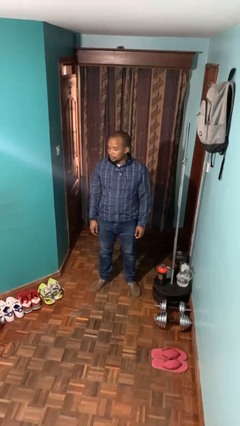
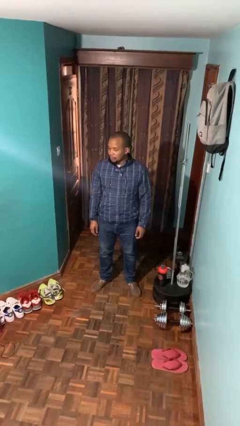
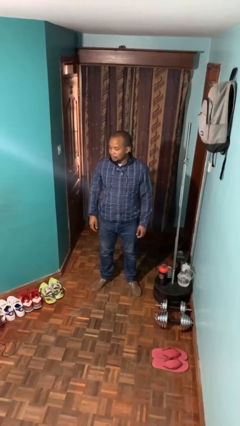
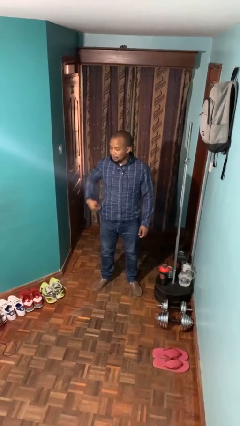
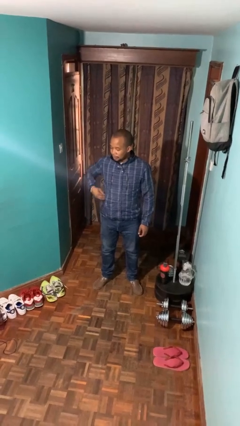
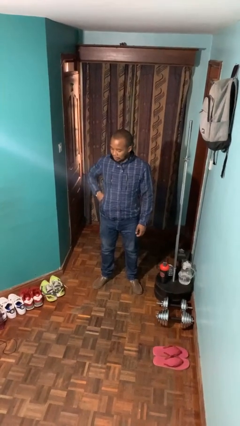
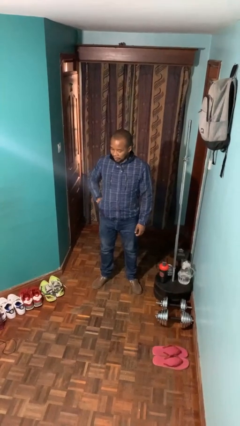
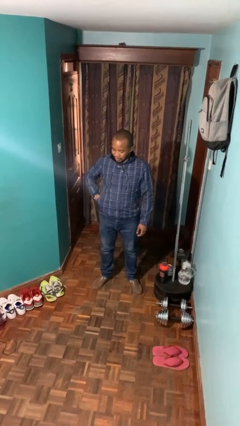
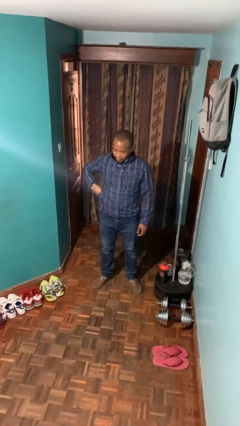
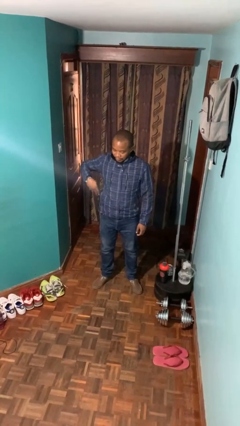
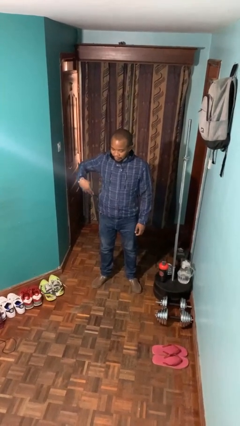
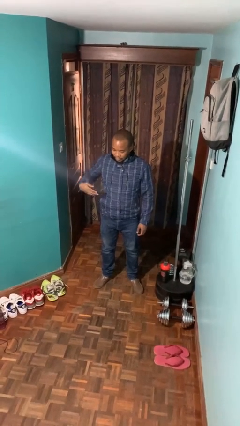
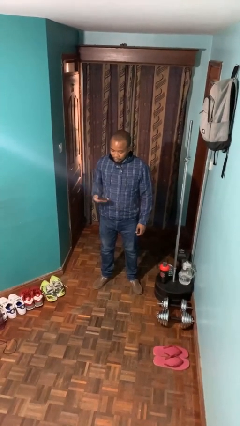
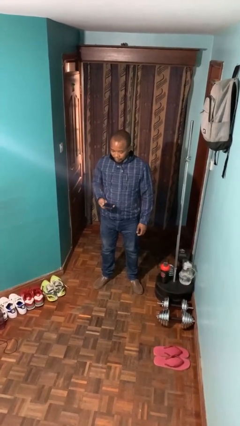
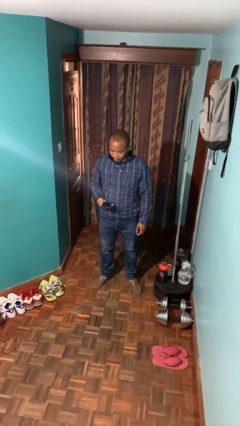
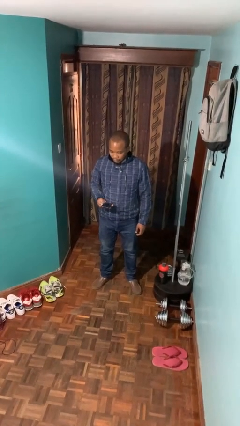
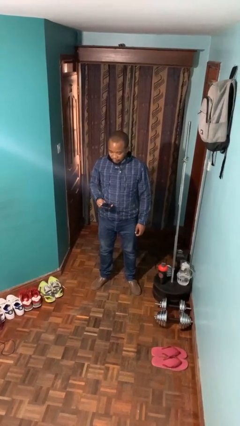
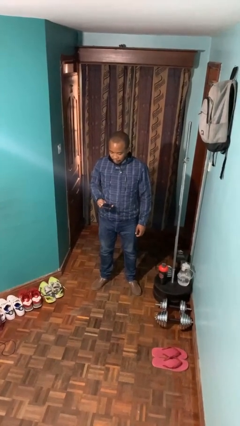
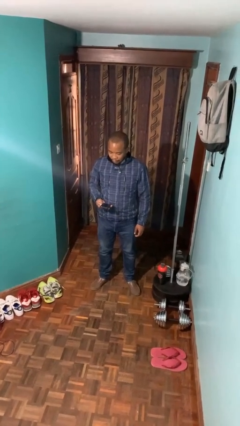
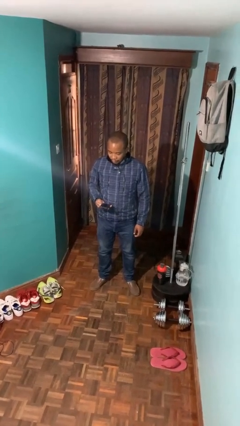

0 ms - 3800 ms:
person takes phone from pocket

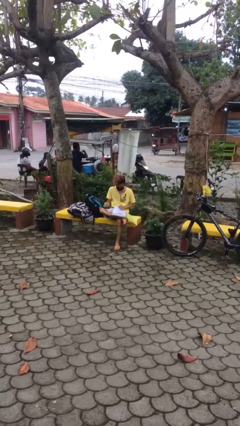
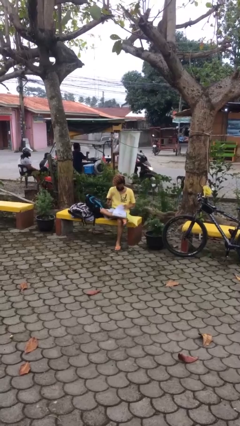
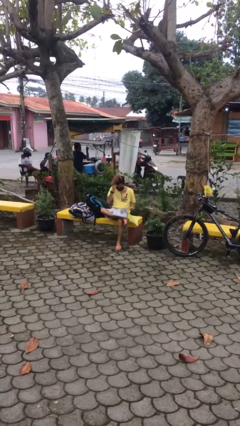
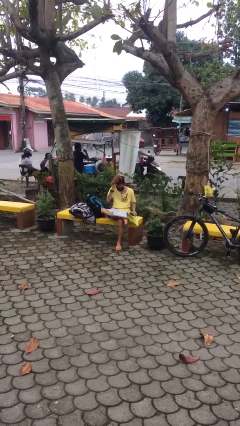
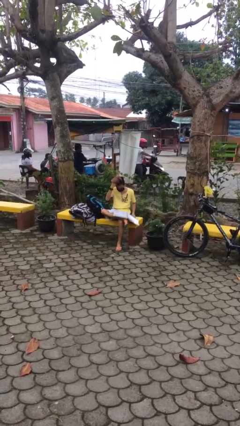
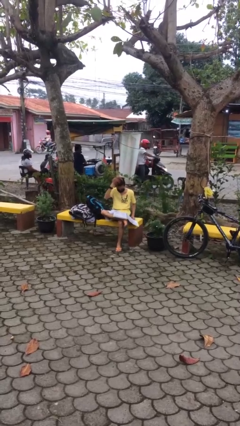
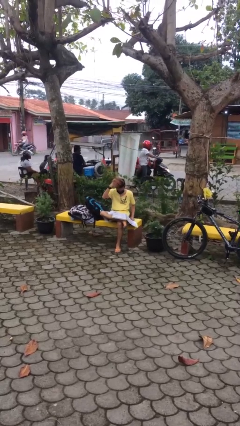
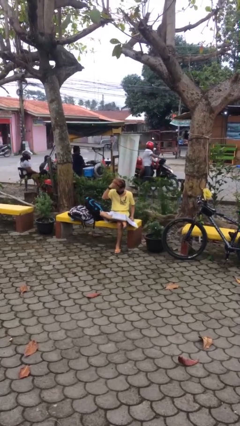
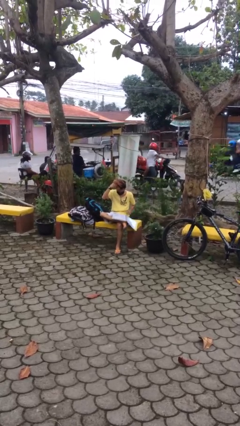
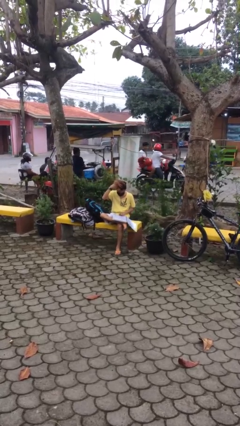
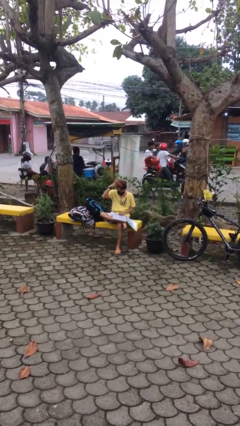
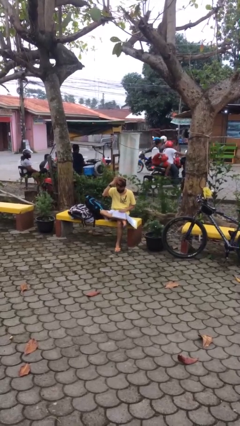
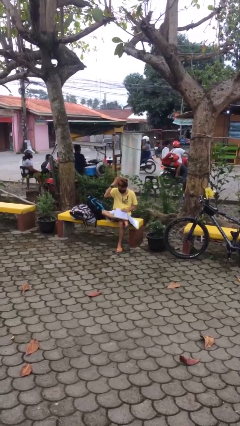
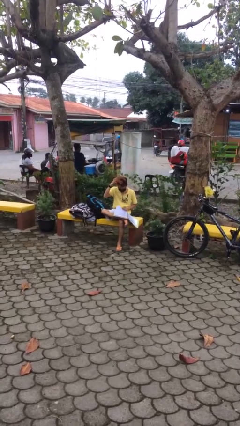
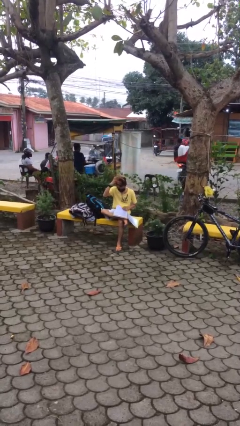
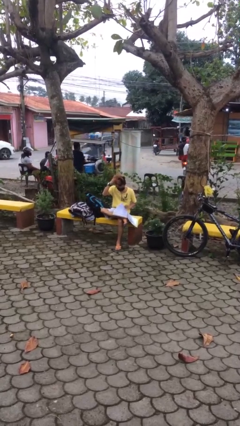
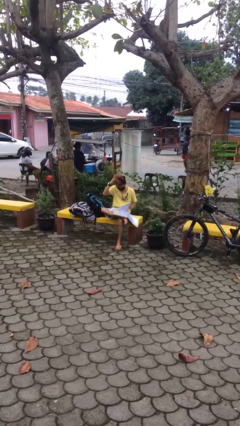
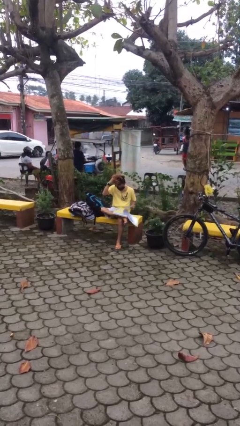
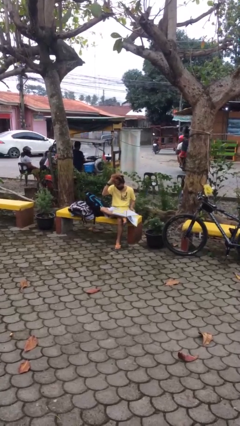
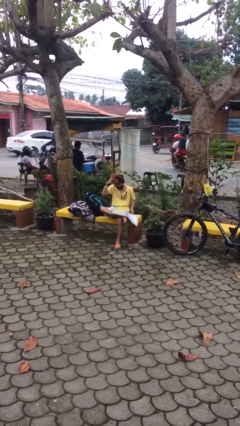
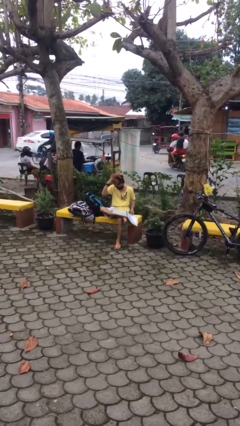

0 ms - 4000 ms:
person reads document

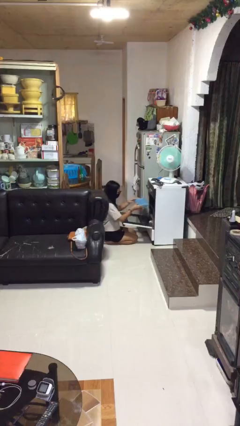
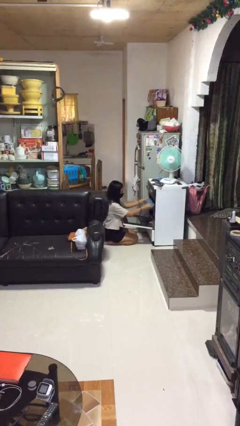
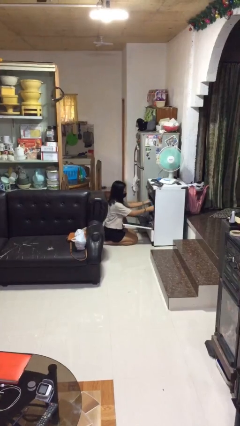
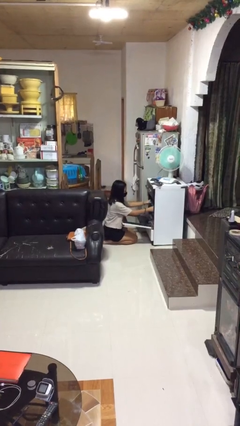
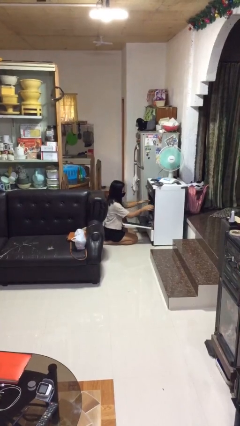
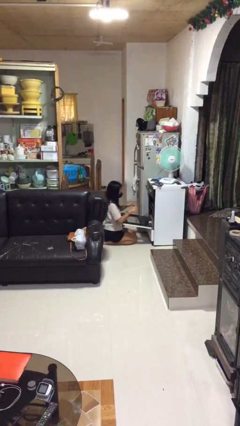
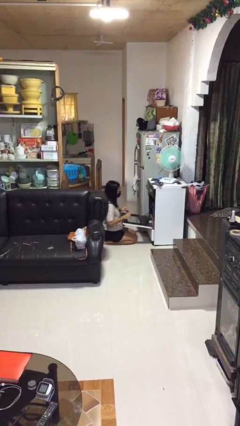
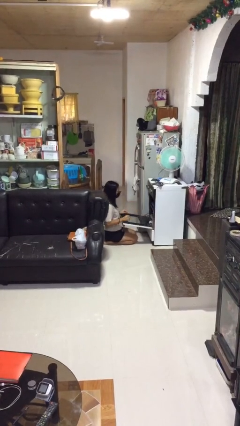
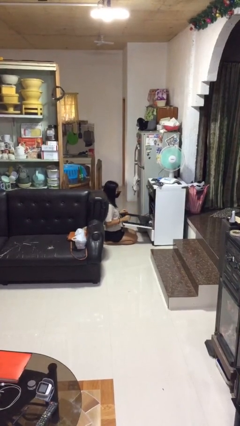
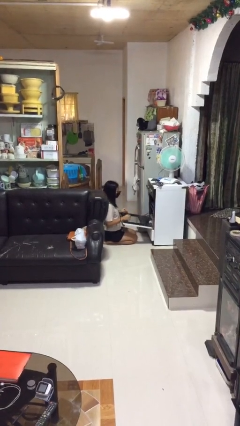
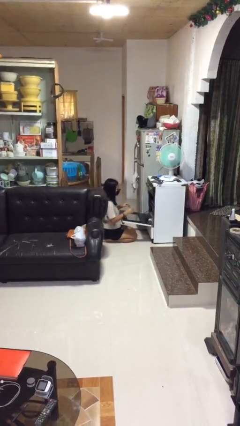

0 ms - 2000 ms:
person puts object into oven

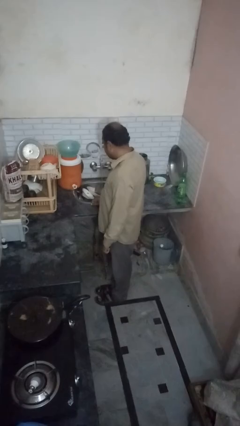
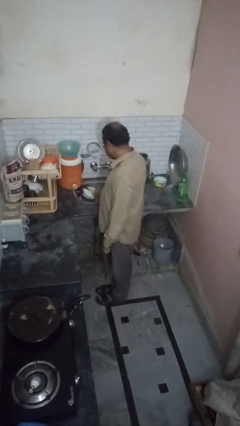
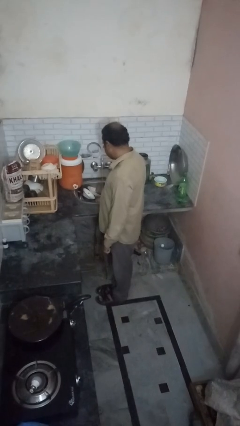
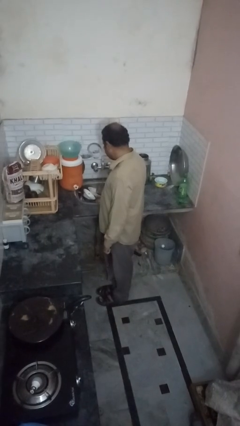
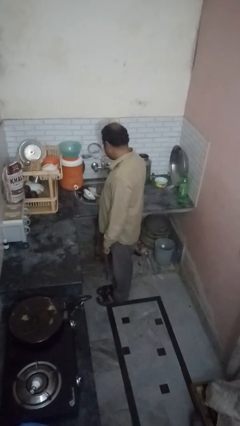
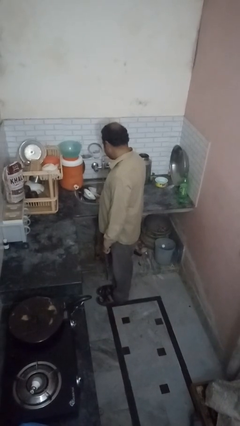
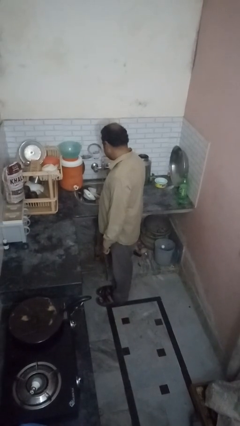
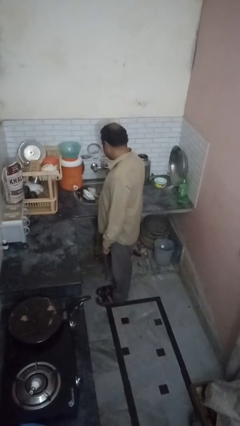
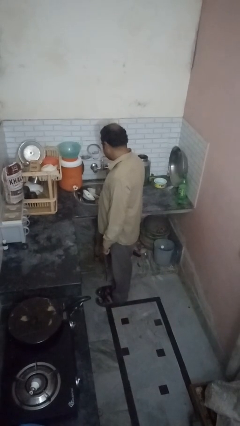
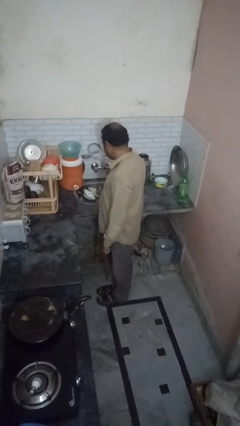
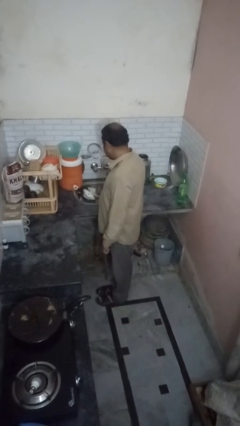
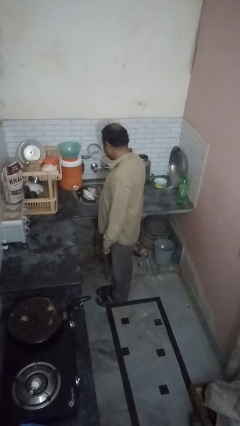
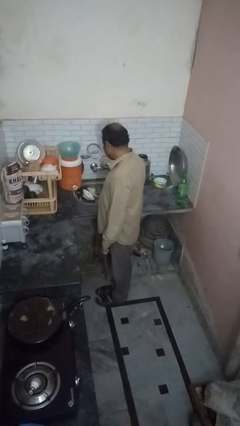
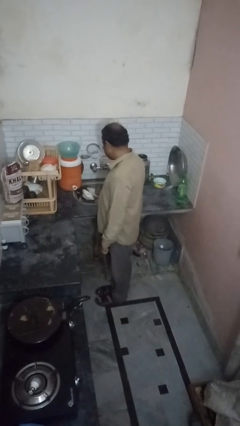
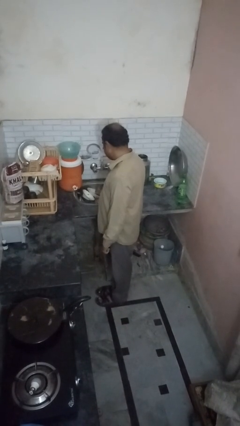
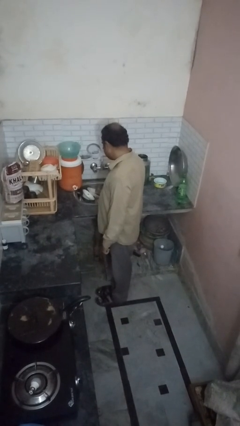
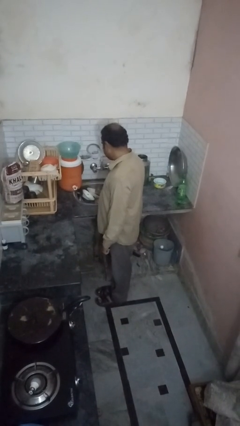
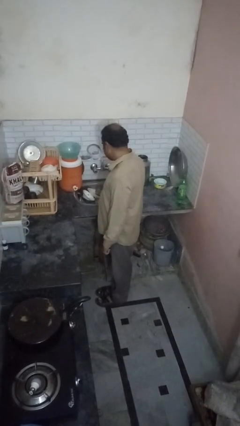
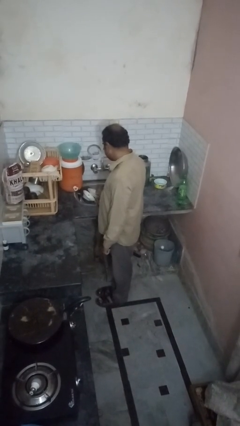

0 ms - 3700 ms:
person closes dishwasher

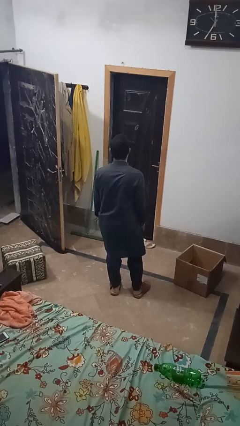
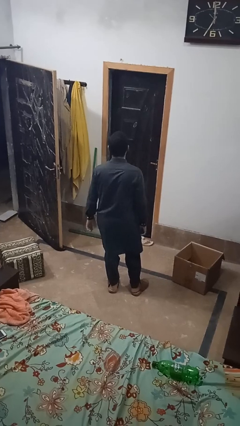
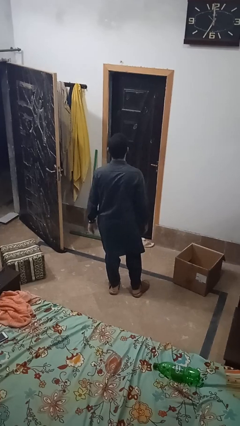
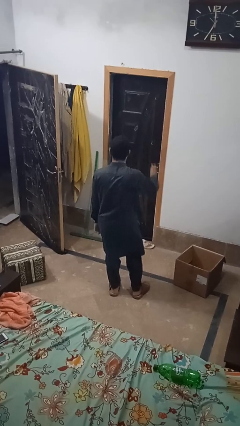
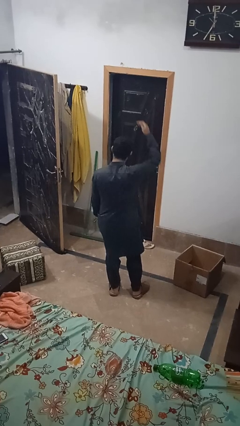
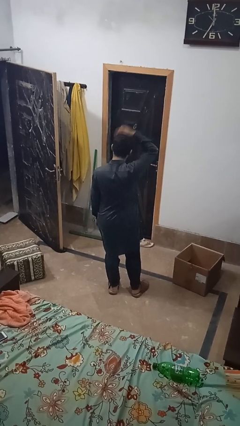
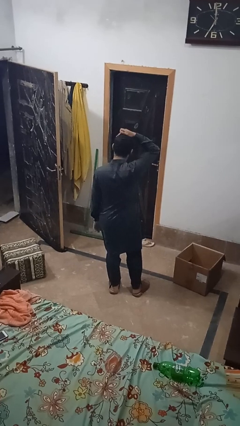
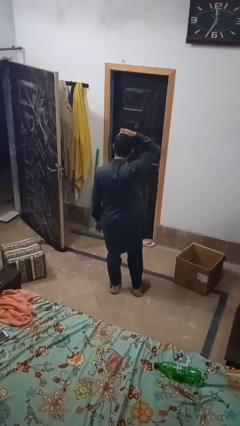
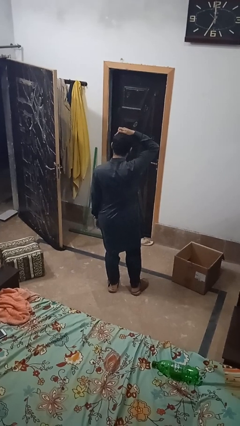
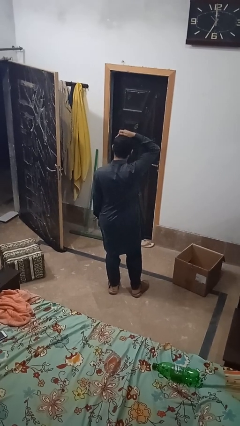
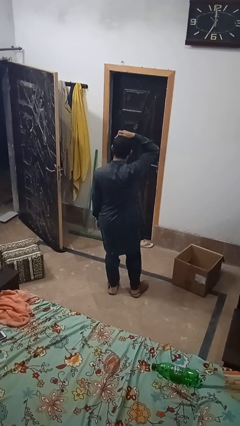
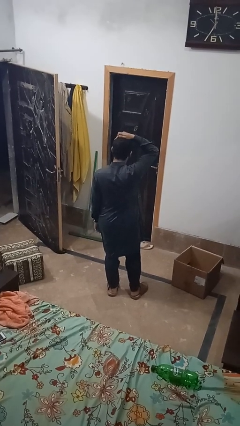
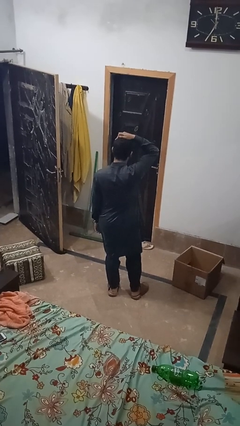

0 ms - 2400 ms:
person pats head

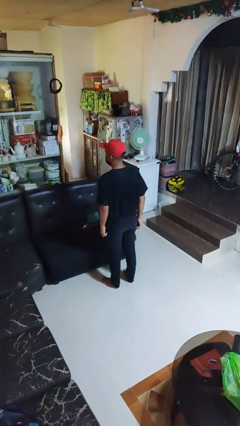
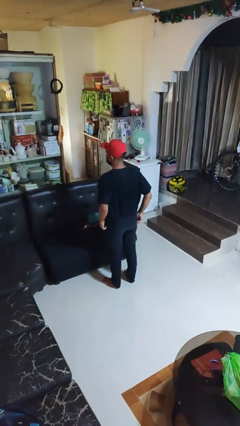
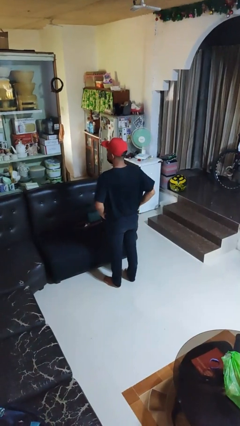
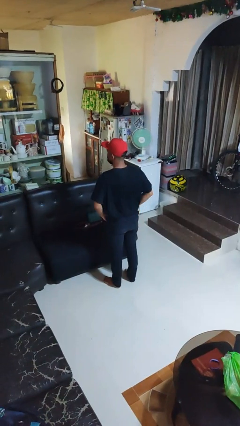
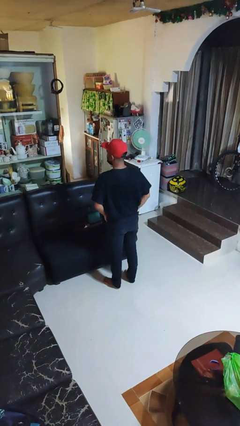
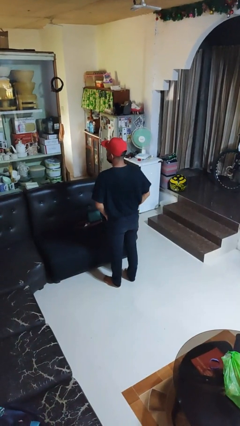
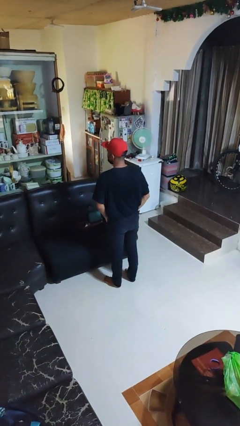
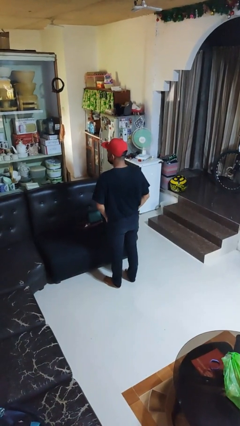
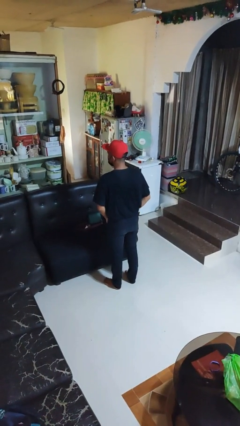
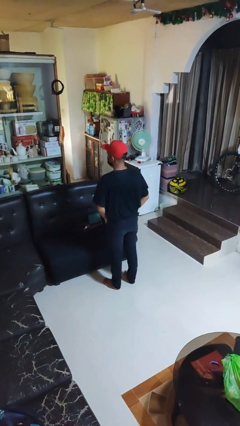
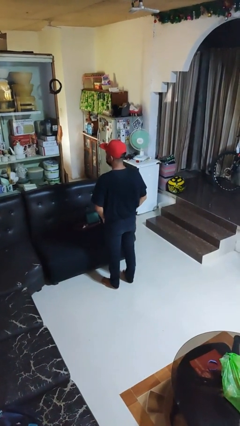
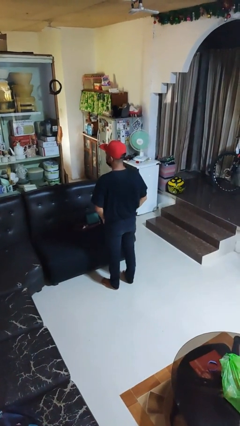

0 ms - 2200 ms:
person puts hands in back pockets
